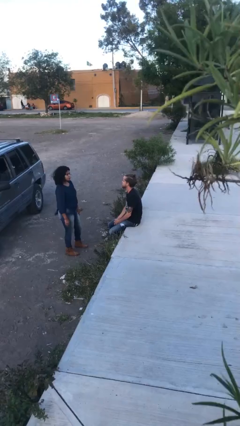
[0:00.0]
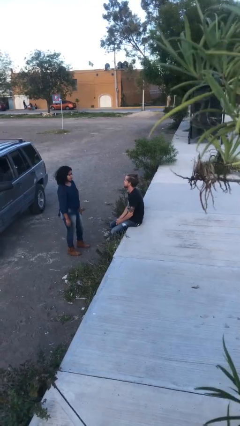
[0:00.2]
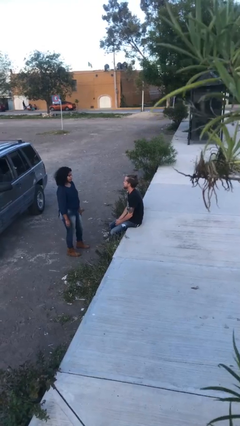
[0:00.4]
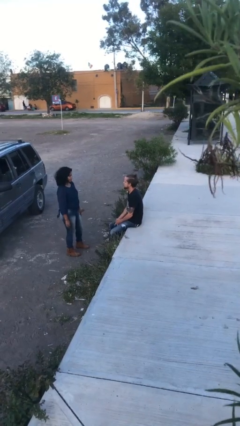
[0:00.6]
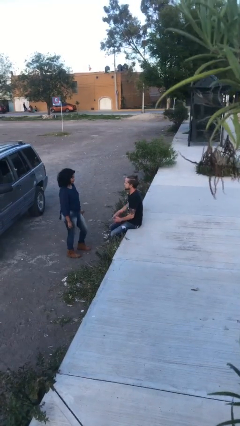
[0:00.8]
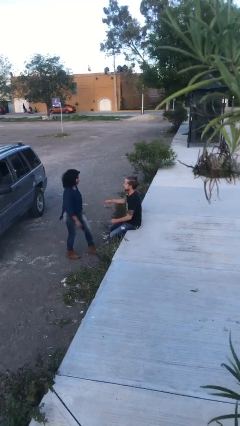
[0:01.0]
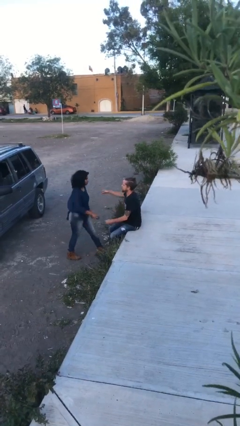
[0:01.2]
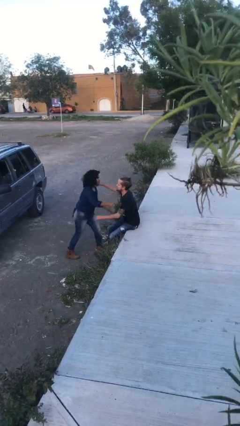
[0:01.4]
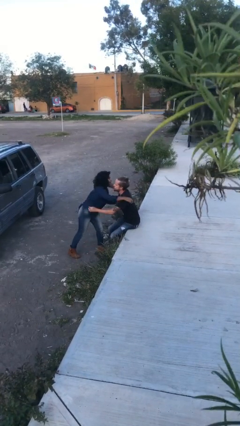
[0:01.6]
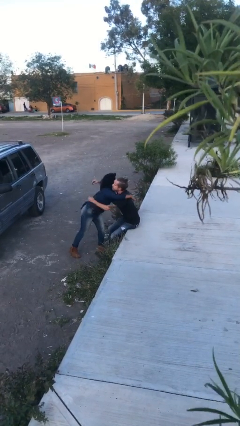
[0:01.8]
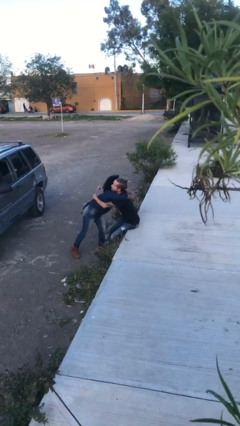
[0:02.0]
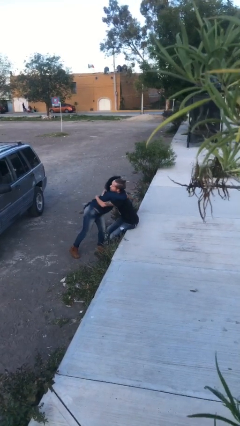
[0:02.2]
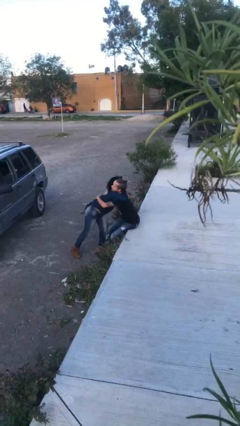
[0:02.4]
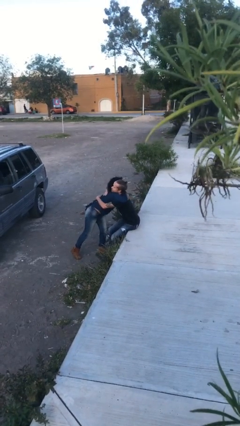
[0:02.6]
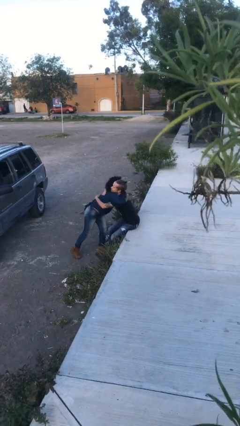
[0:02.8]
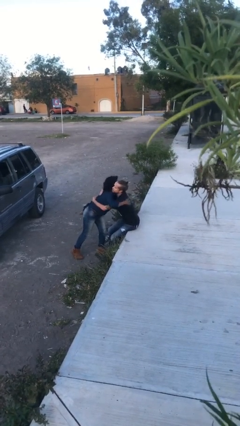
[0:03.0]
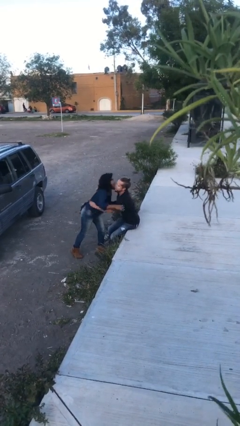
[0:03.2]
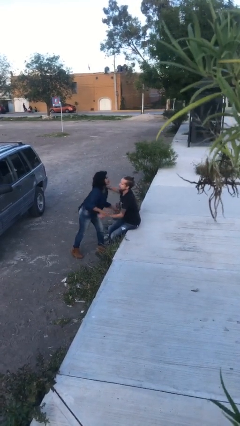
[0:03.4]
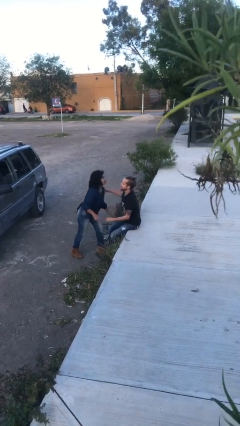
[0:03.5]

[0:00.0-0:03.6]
person embraces person

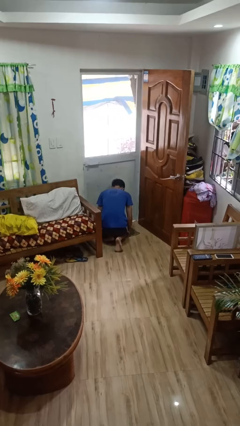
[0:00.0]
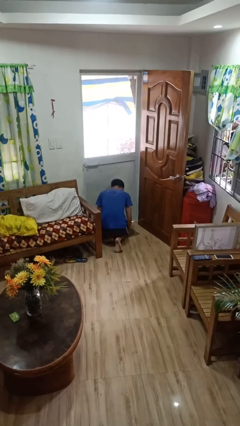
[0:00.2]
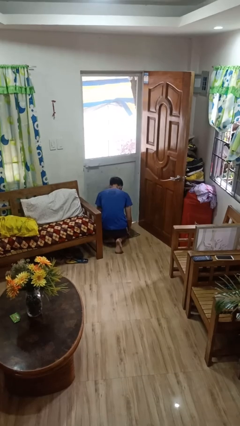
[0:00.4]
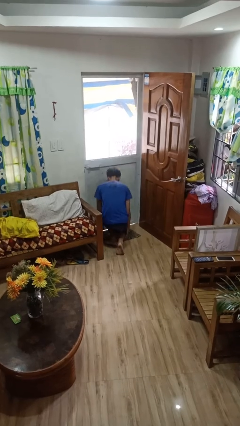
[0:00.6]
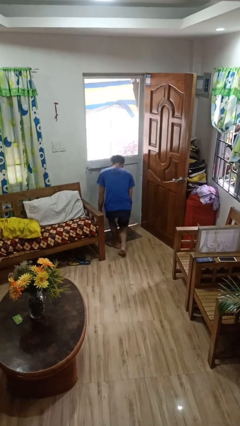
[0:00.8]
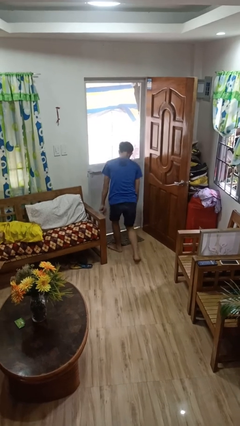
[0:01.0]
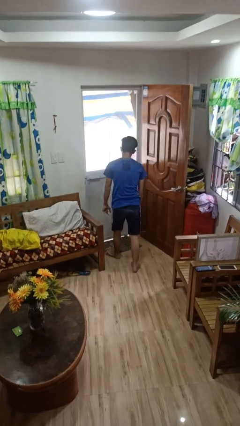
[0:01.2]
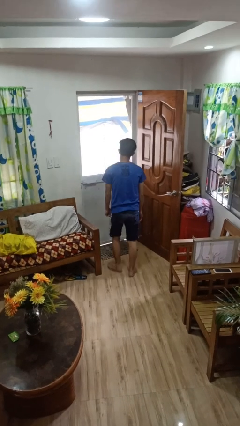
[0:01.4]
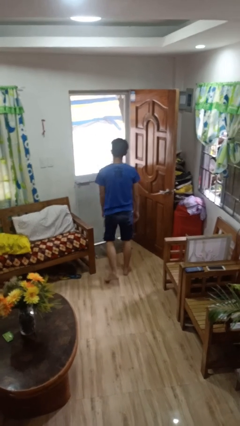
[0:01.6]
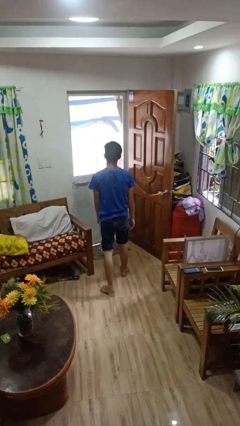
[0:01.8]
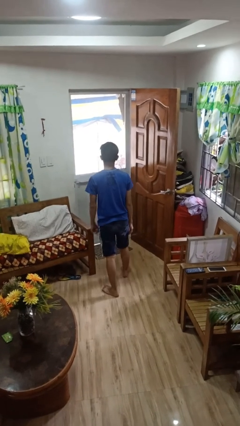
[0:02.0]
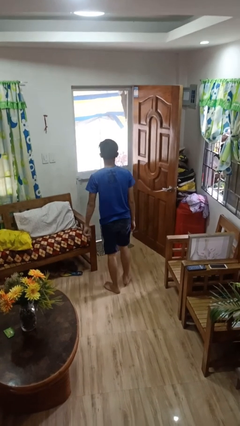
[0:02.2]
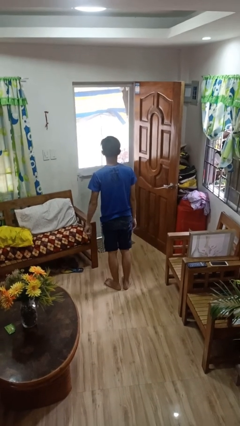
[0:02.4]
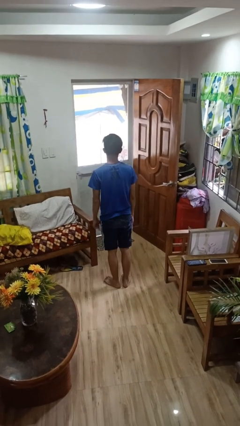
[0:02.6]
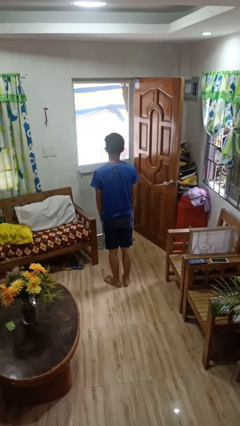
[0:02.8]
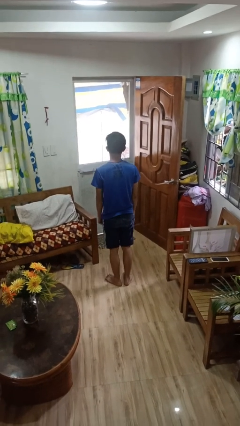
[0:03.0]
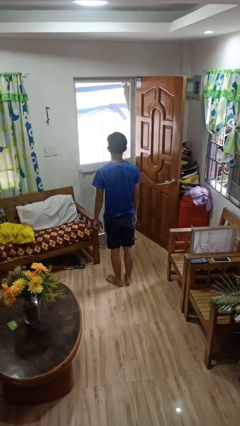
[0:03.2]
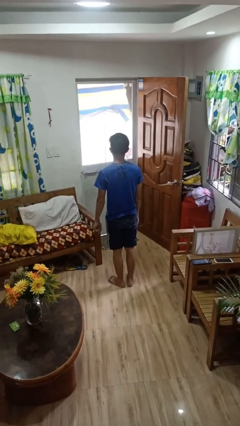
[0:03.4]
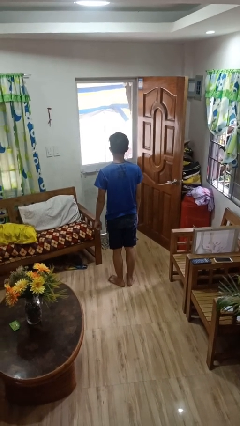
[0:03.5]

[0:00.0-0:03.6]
person stands up from floor

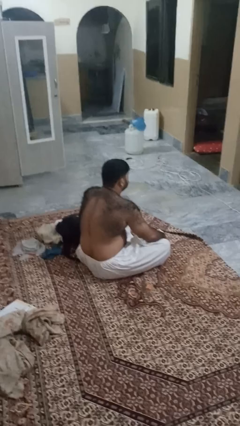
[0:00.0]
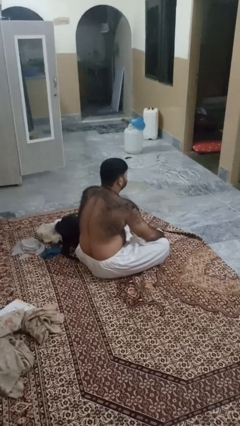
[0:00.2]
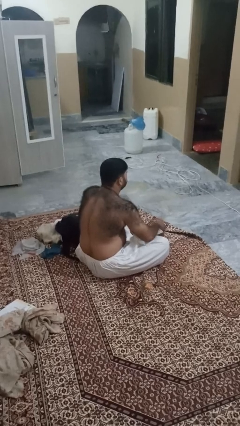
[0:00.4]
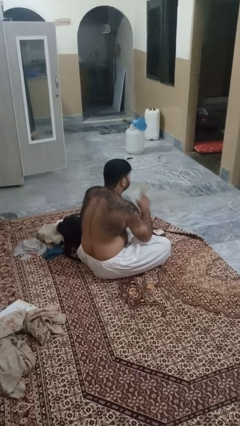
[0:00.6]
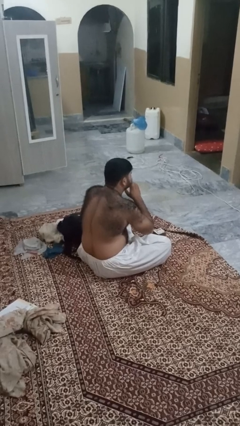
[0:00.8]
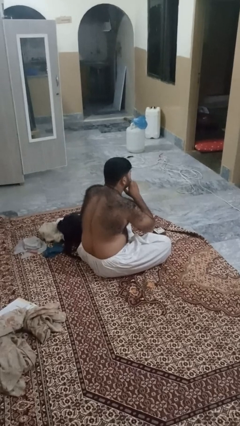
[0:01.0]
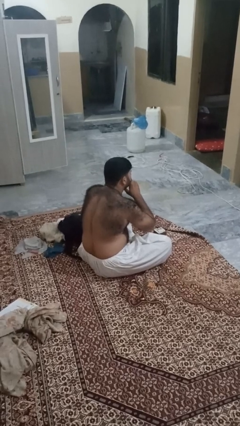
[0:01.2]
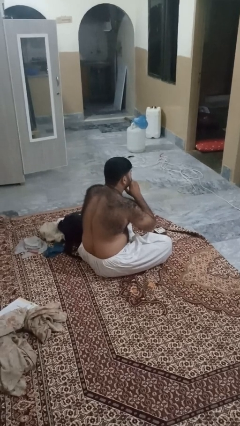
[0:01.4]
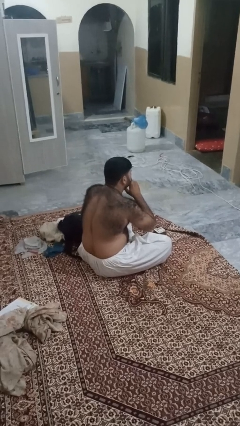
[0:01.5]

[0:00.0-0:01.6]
person gestures be quiet

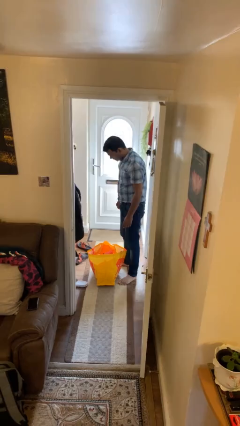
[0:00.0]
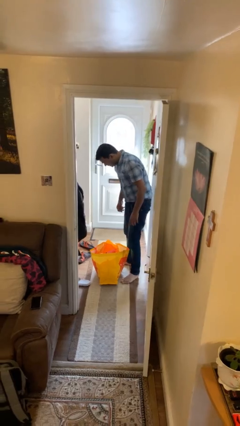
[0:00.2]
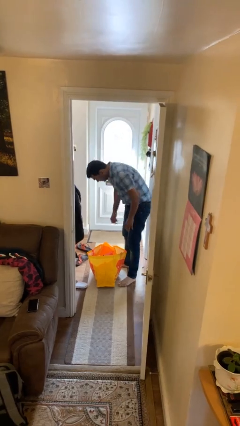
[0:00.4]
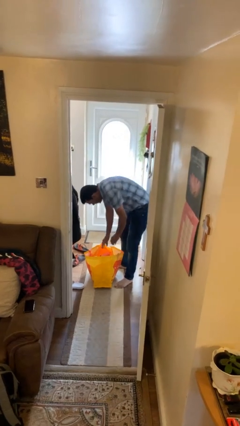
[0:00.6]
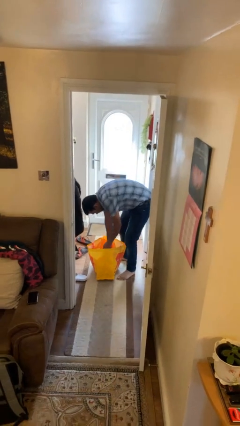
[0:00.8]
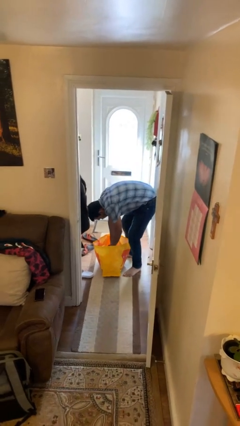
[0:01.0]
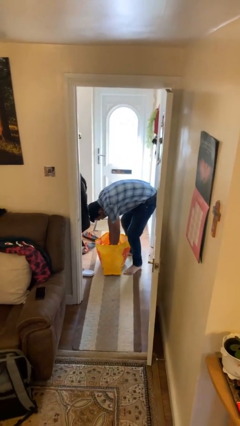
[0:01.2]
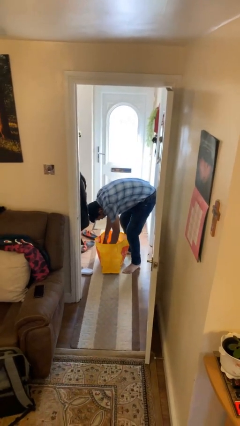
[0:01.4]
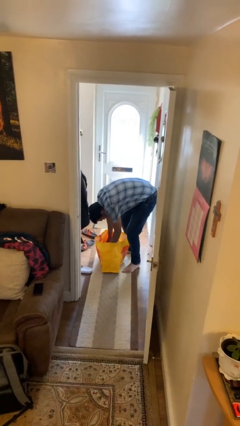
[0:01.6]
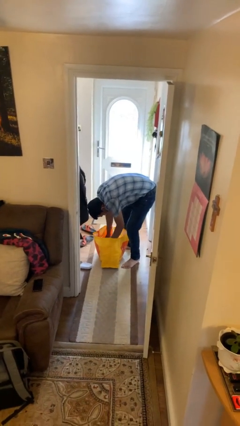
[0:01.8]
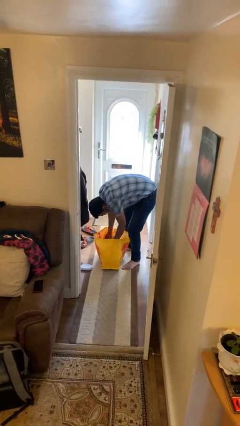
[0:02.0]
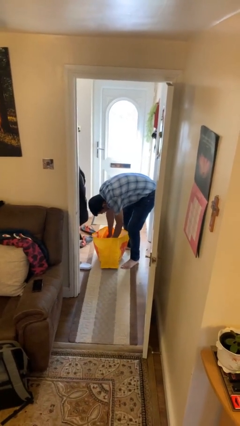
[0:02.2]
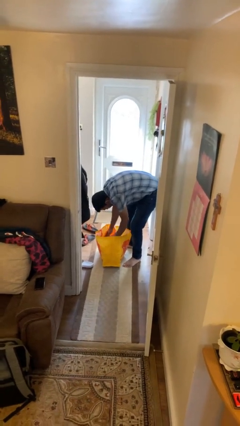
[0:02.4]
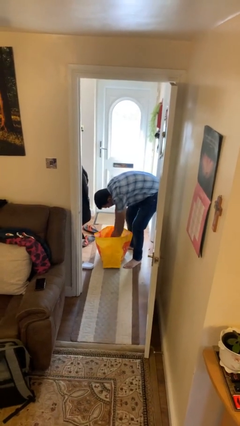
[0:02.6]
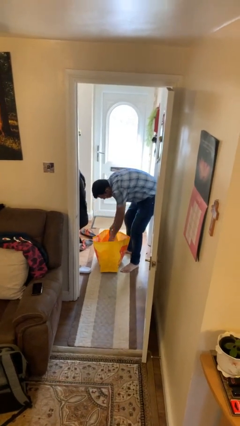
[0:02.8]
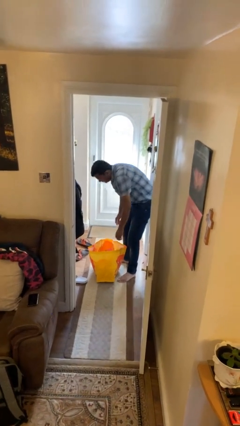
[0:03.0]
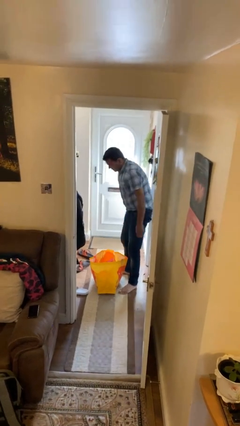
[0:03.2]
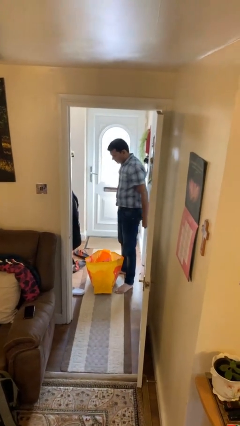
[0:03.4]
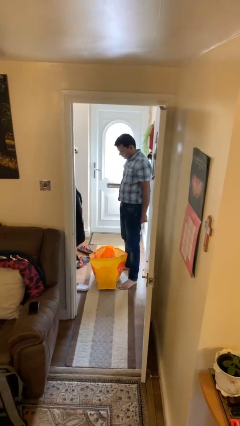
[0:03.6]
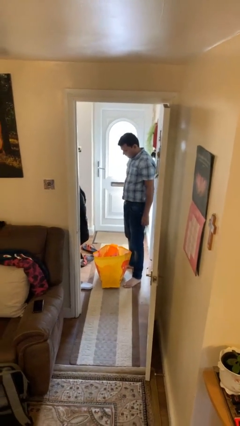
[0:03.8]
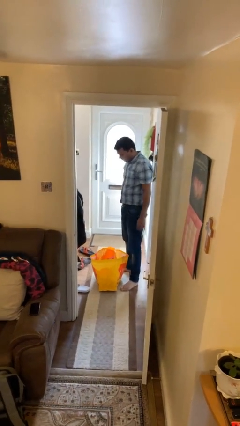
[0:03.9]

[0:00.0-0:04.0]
person searches in bag

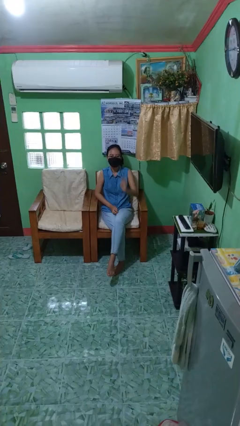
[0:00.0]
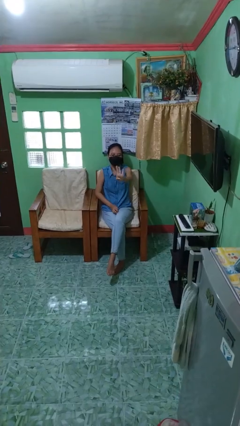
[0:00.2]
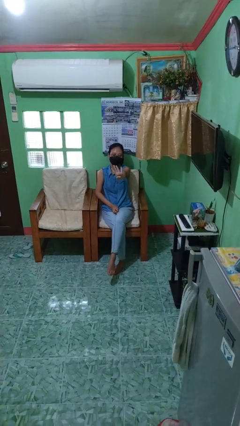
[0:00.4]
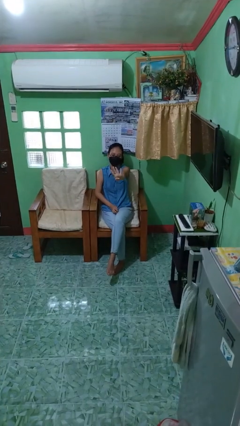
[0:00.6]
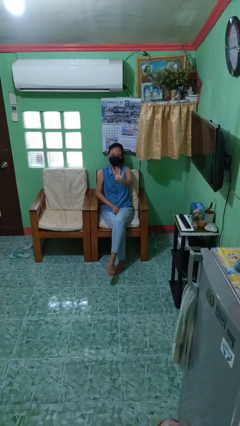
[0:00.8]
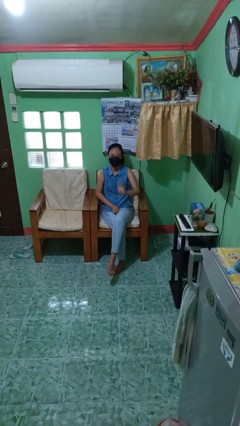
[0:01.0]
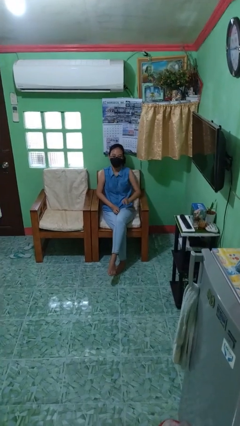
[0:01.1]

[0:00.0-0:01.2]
person gestures number four

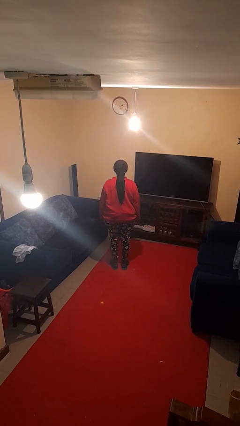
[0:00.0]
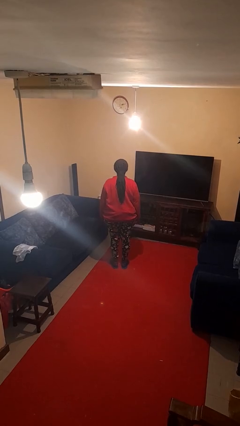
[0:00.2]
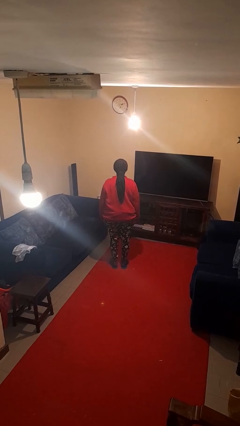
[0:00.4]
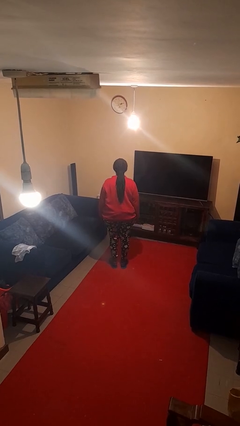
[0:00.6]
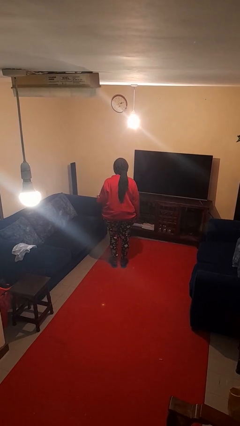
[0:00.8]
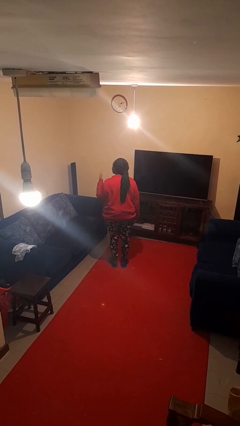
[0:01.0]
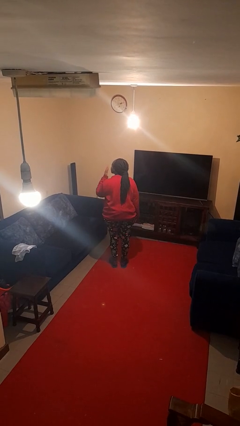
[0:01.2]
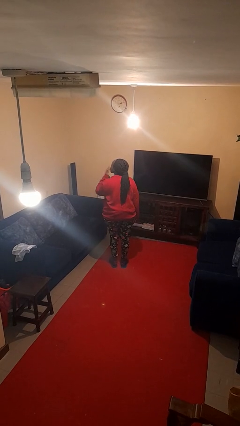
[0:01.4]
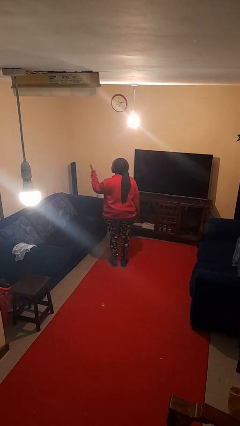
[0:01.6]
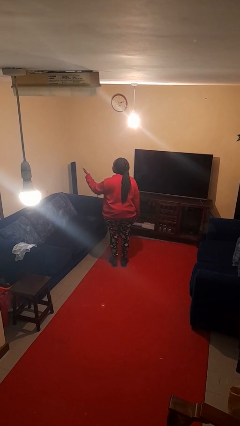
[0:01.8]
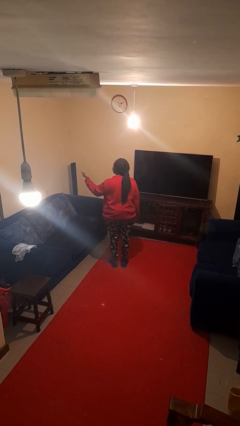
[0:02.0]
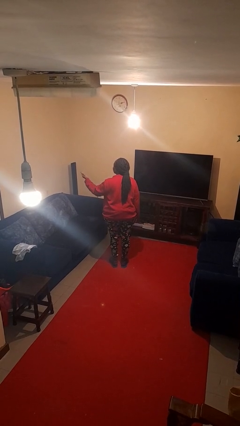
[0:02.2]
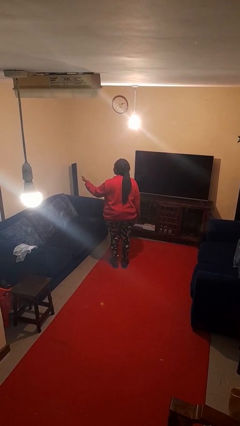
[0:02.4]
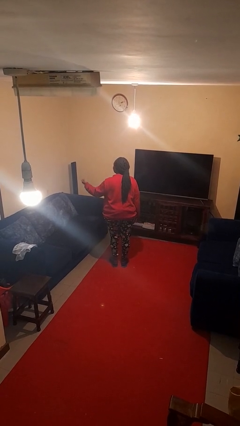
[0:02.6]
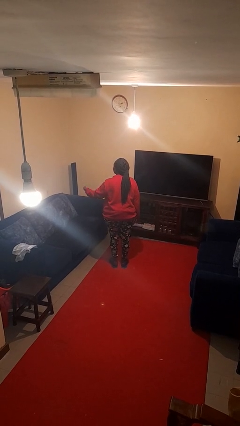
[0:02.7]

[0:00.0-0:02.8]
person gestures blow kiss

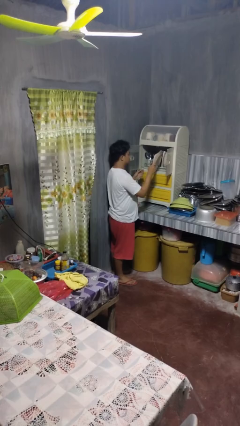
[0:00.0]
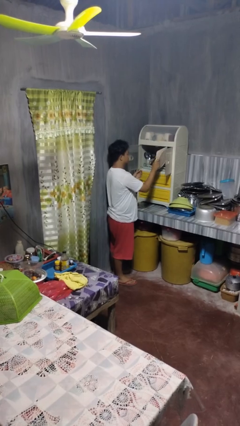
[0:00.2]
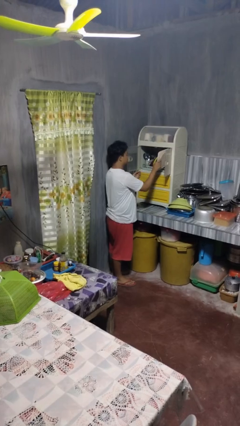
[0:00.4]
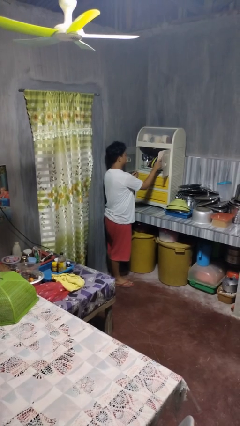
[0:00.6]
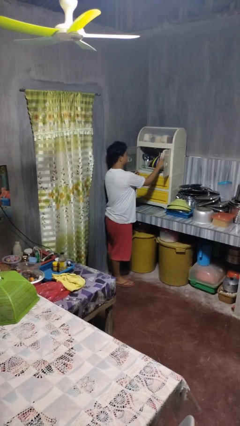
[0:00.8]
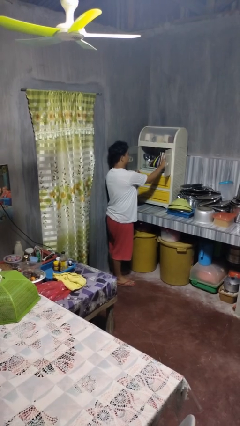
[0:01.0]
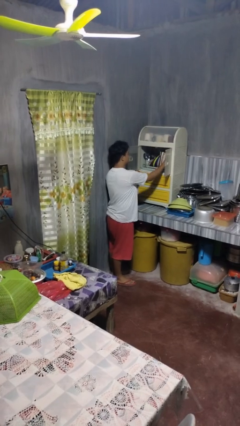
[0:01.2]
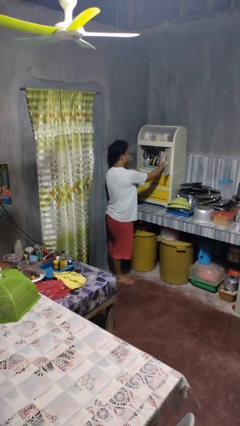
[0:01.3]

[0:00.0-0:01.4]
person puts down object into cabinet
